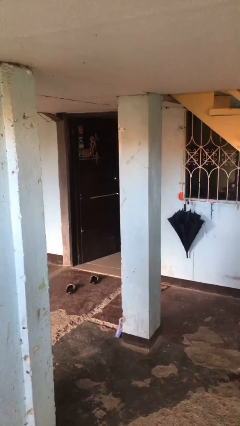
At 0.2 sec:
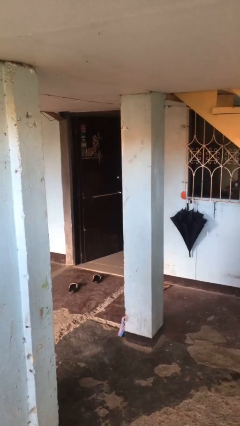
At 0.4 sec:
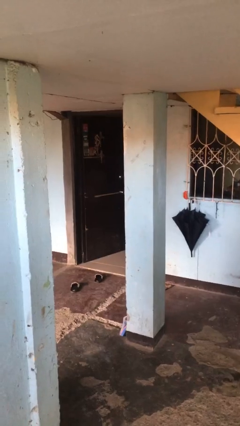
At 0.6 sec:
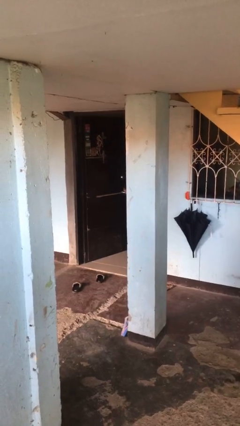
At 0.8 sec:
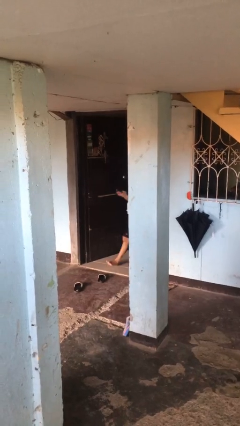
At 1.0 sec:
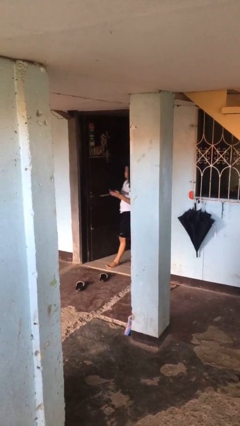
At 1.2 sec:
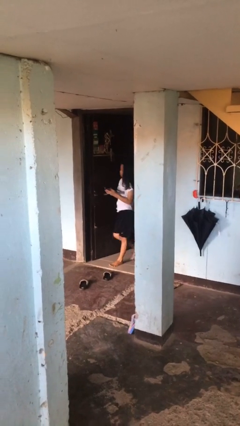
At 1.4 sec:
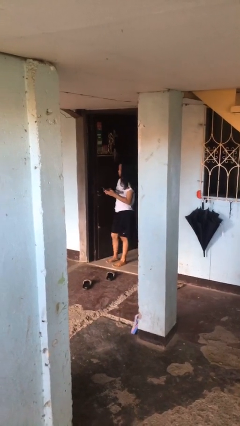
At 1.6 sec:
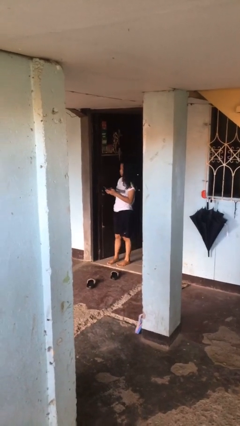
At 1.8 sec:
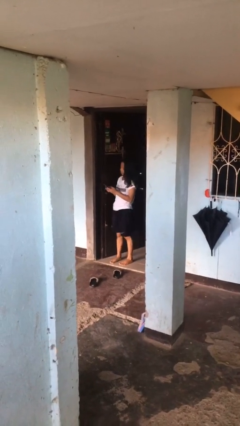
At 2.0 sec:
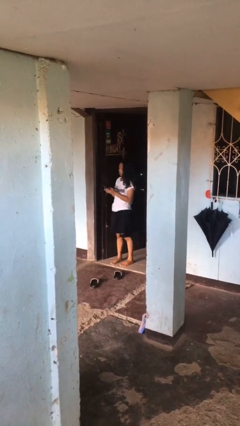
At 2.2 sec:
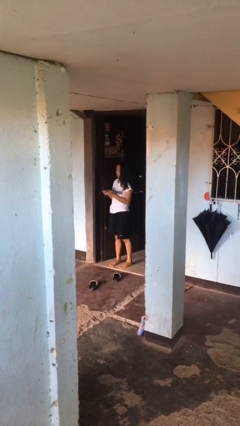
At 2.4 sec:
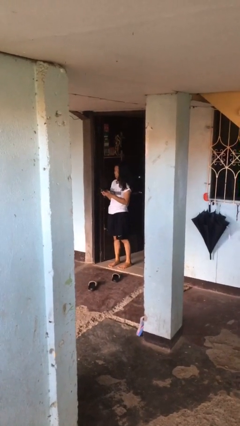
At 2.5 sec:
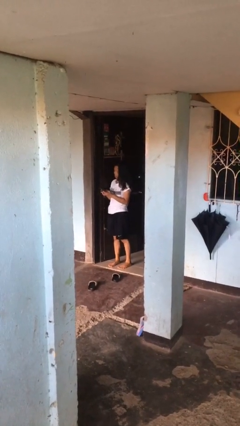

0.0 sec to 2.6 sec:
person enters scene through structure

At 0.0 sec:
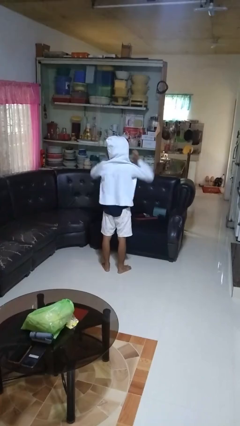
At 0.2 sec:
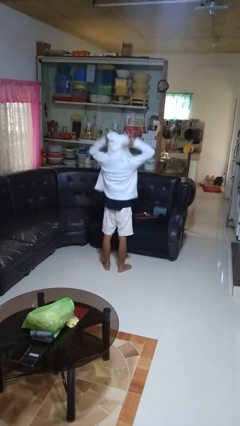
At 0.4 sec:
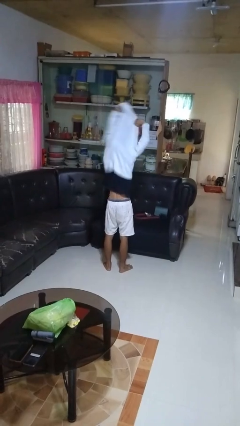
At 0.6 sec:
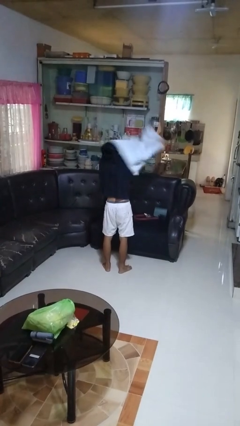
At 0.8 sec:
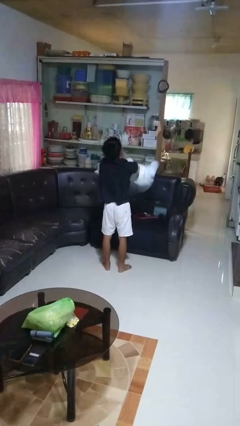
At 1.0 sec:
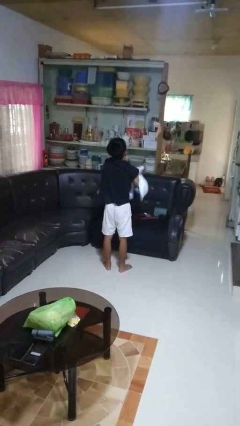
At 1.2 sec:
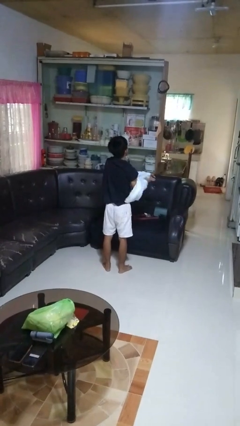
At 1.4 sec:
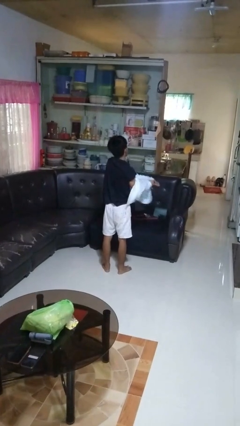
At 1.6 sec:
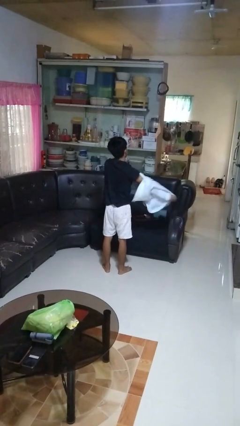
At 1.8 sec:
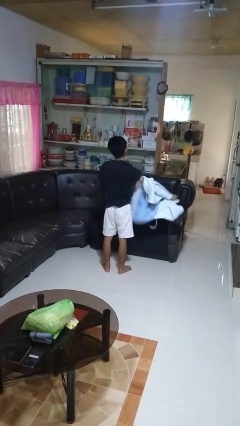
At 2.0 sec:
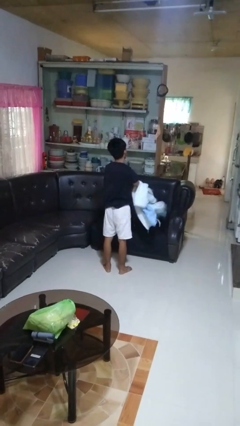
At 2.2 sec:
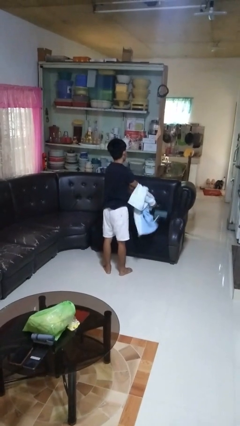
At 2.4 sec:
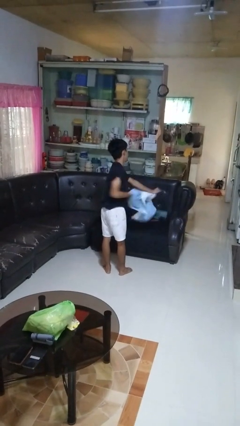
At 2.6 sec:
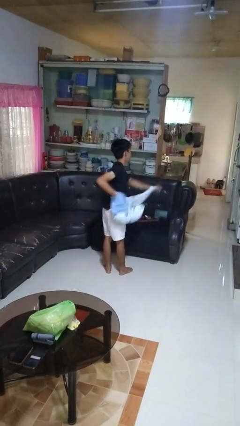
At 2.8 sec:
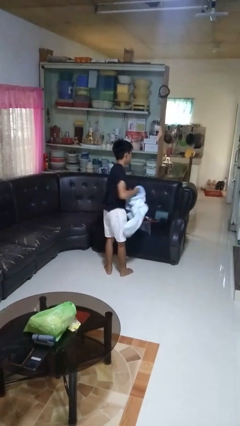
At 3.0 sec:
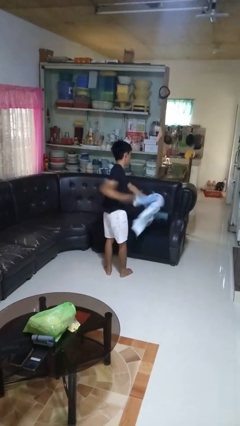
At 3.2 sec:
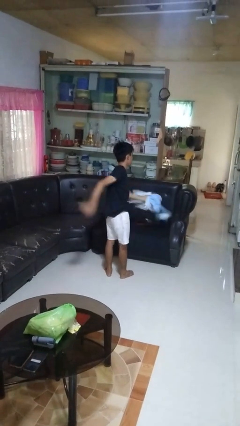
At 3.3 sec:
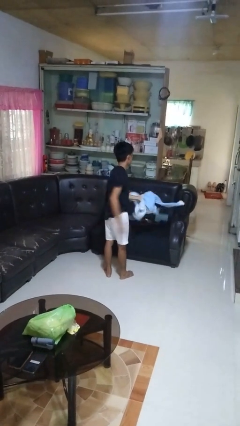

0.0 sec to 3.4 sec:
person takes off hoodie

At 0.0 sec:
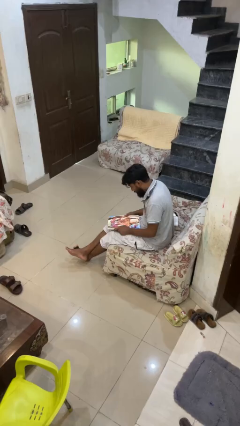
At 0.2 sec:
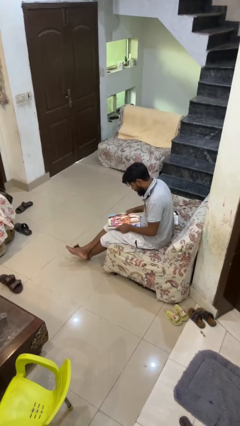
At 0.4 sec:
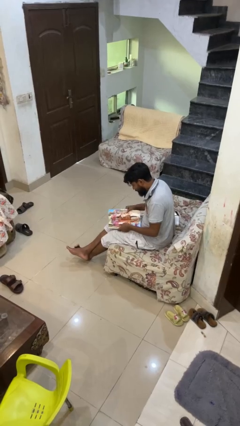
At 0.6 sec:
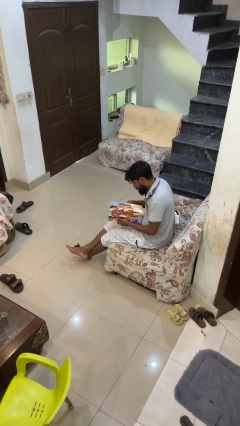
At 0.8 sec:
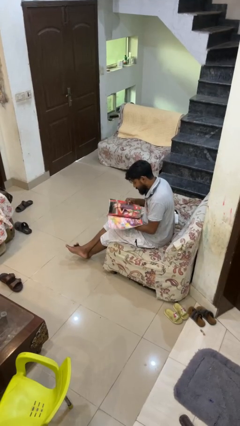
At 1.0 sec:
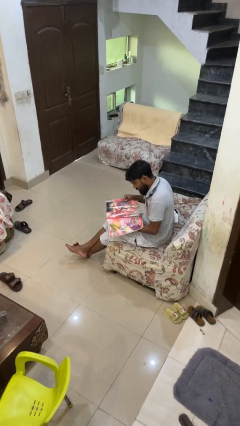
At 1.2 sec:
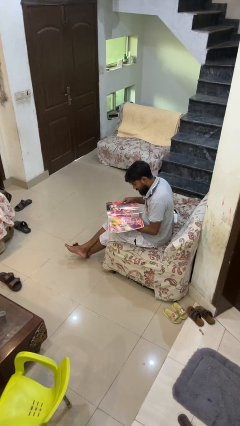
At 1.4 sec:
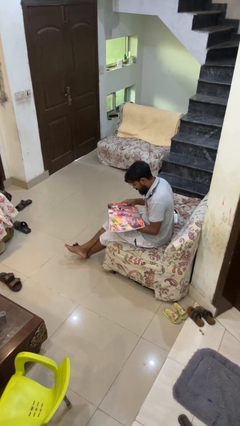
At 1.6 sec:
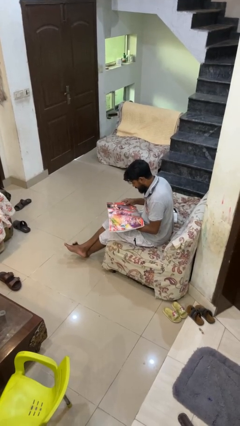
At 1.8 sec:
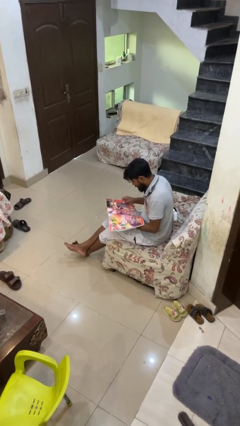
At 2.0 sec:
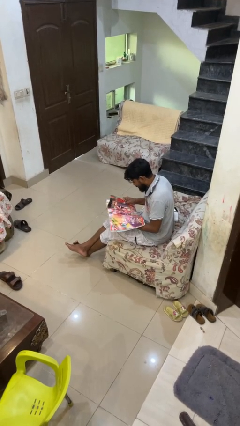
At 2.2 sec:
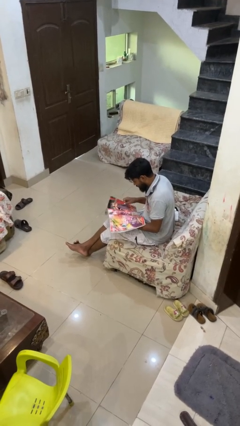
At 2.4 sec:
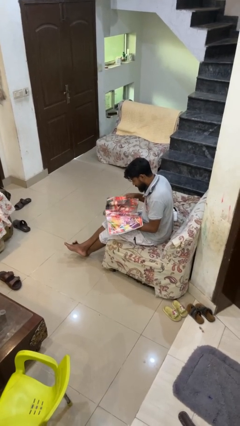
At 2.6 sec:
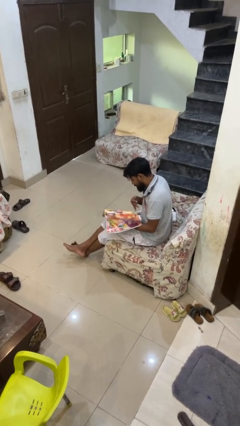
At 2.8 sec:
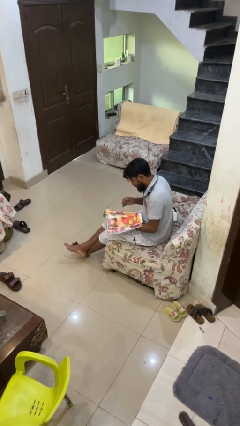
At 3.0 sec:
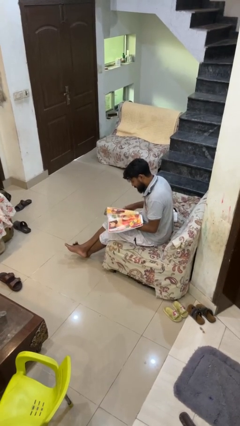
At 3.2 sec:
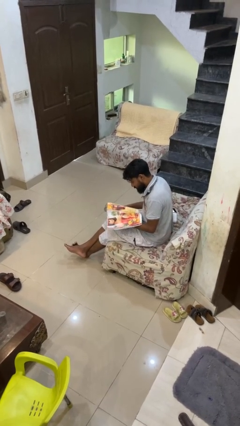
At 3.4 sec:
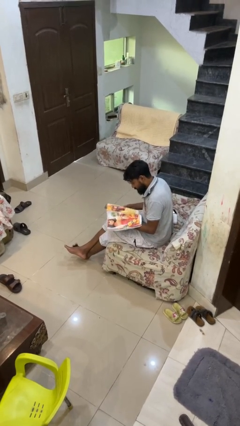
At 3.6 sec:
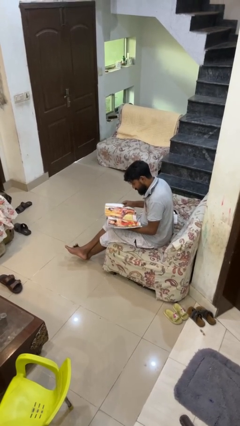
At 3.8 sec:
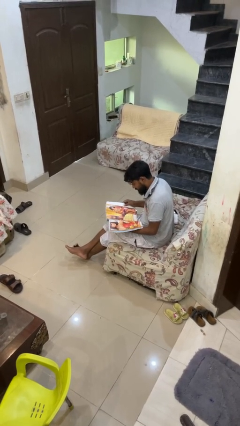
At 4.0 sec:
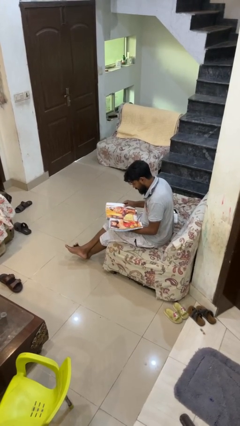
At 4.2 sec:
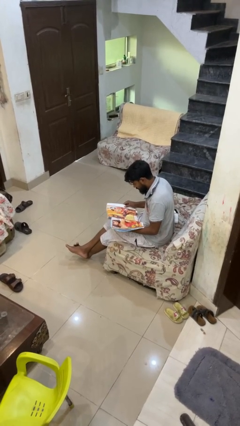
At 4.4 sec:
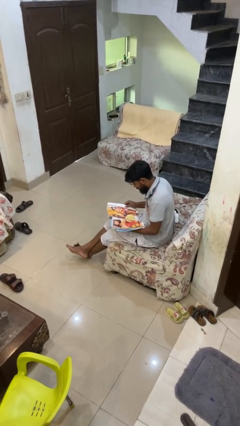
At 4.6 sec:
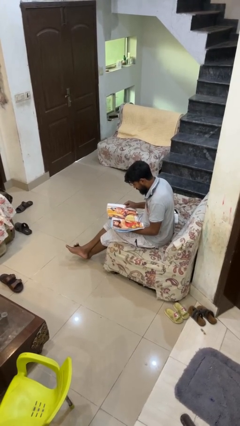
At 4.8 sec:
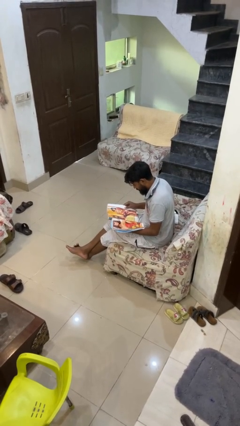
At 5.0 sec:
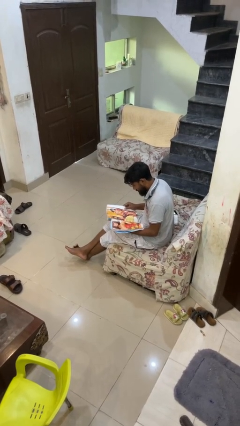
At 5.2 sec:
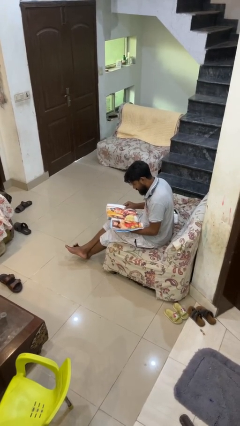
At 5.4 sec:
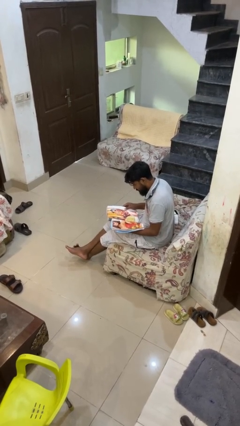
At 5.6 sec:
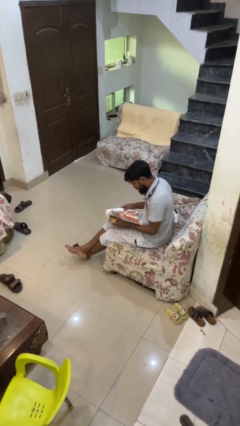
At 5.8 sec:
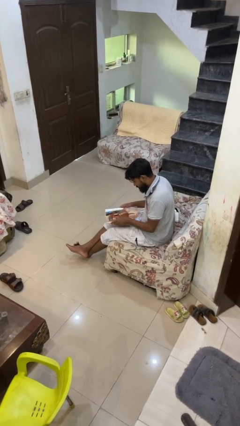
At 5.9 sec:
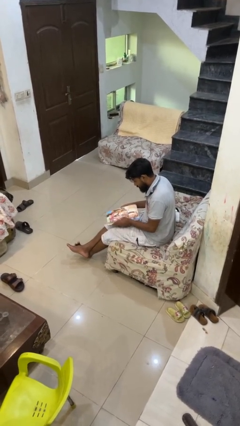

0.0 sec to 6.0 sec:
person reads magazine

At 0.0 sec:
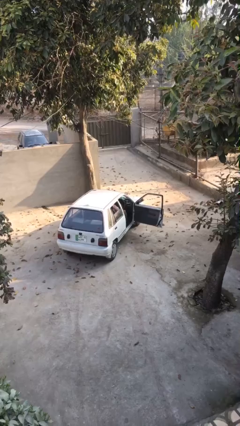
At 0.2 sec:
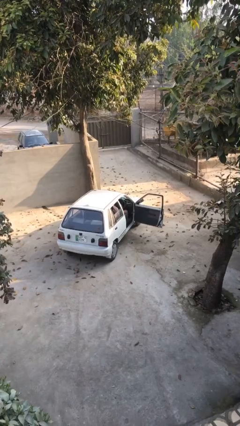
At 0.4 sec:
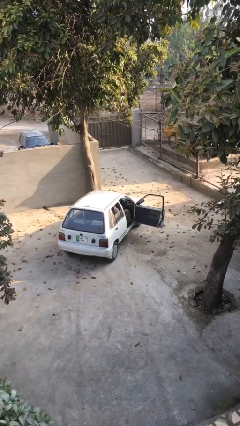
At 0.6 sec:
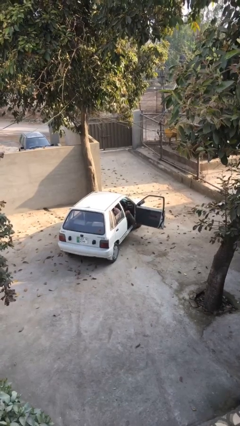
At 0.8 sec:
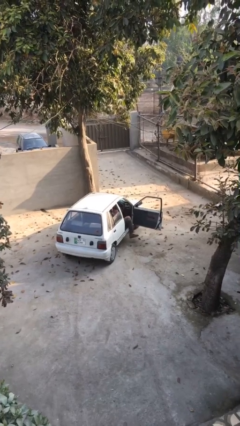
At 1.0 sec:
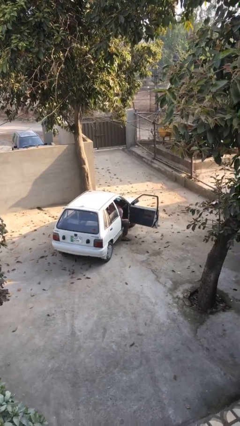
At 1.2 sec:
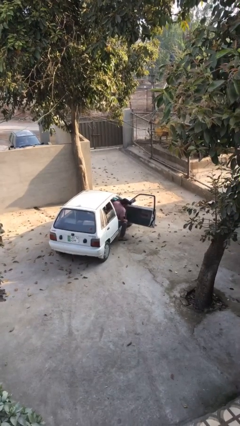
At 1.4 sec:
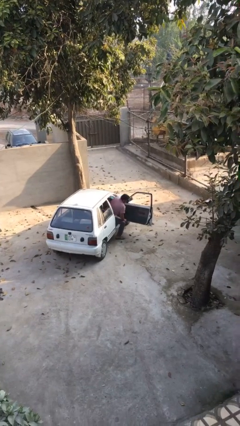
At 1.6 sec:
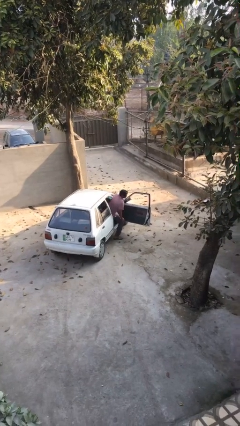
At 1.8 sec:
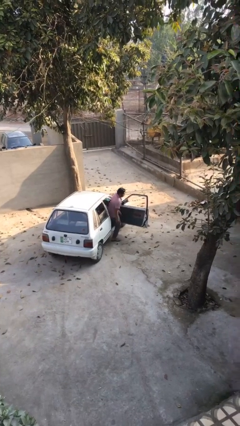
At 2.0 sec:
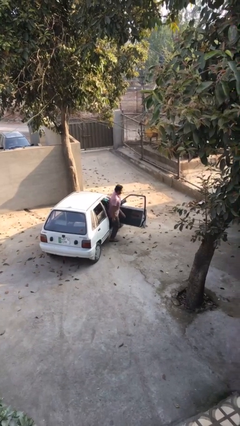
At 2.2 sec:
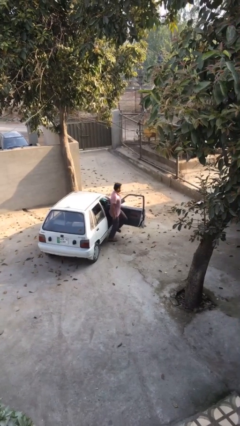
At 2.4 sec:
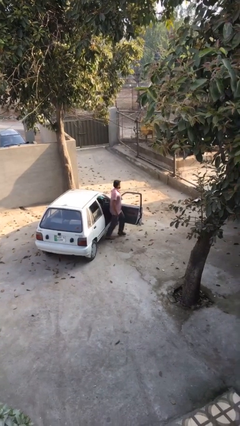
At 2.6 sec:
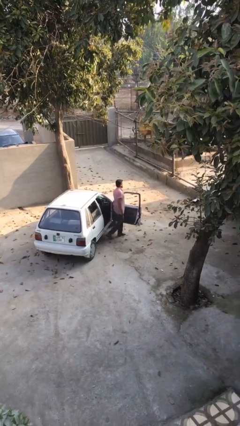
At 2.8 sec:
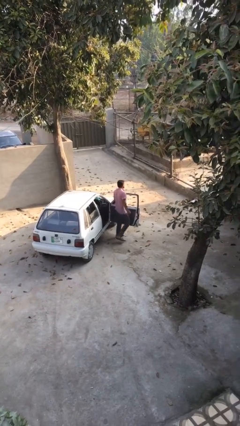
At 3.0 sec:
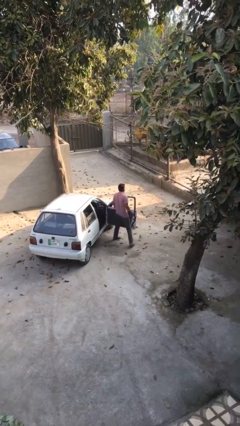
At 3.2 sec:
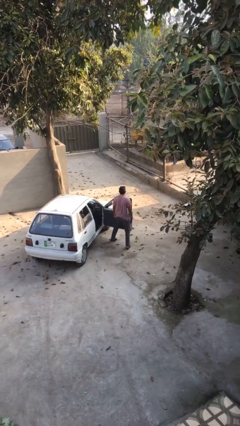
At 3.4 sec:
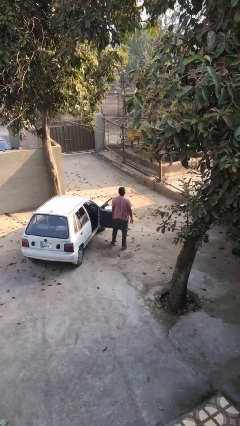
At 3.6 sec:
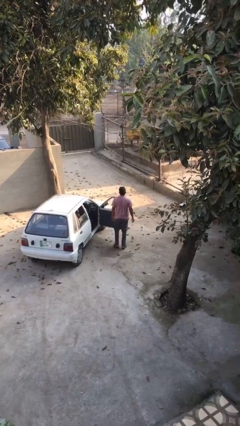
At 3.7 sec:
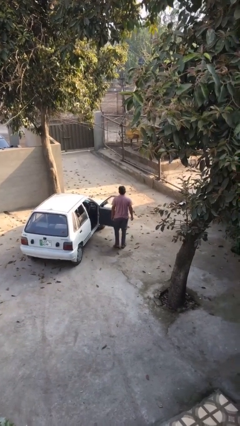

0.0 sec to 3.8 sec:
person exits car

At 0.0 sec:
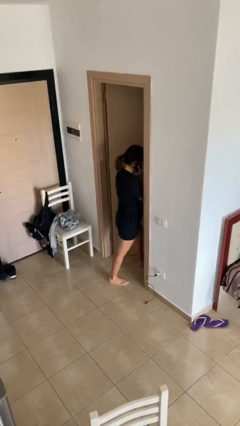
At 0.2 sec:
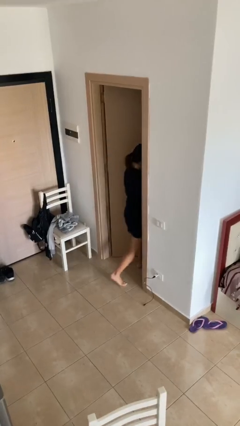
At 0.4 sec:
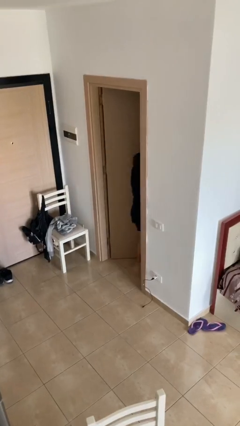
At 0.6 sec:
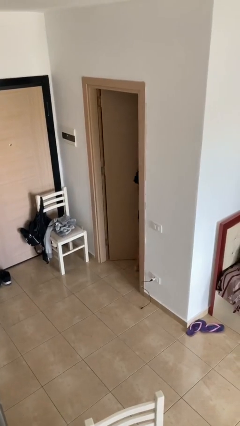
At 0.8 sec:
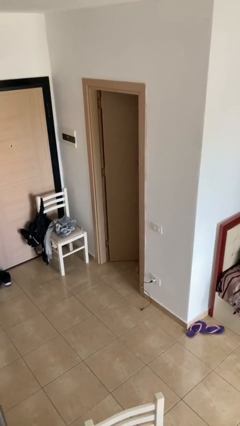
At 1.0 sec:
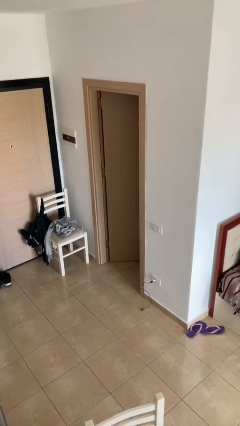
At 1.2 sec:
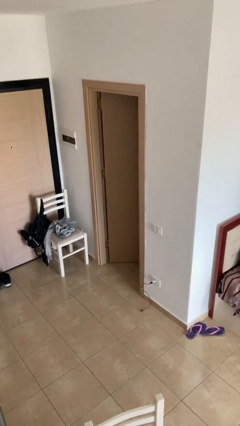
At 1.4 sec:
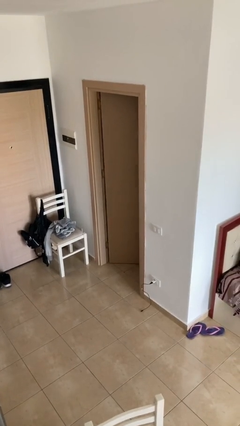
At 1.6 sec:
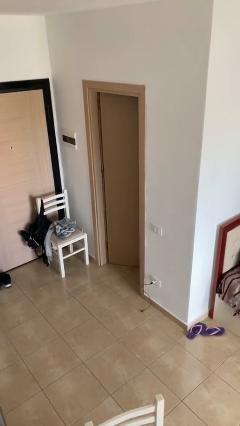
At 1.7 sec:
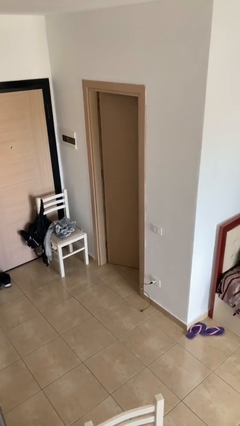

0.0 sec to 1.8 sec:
person exits scene through structure
